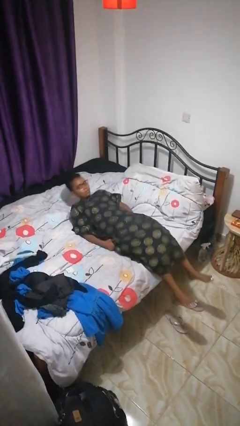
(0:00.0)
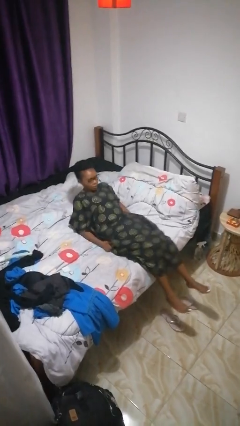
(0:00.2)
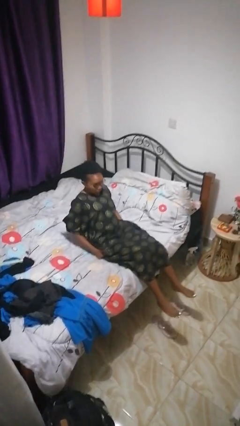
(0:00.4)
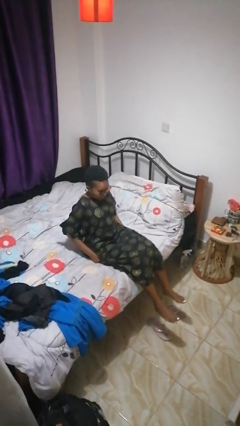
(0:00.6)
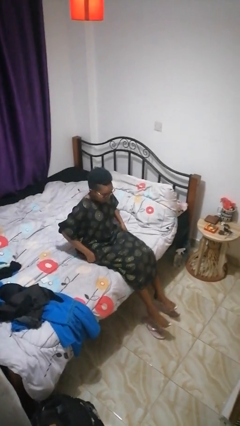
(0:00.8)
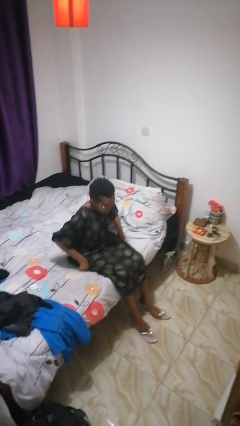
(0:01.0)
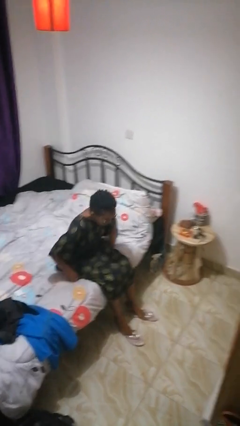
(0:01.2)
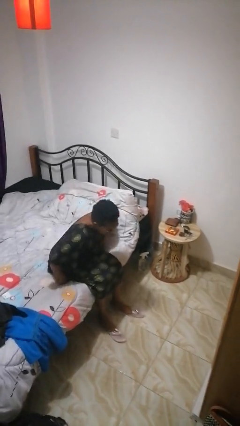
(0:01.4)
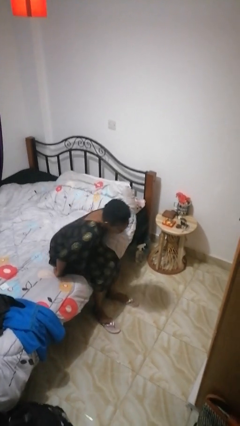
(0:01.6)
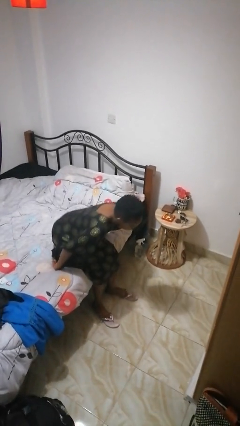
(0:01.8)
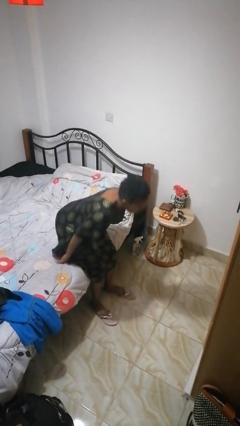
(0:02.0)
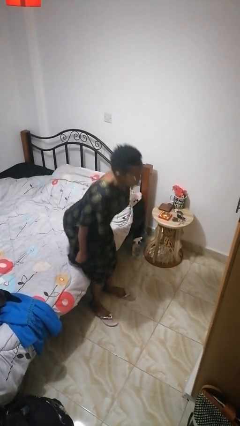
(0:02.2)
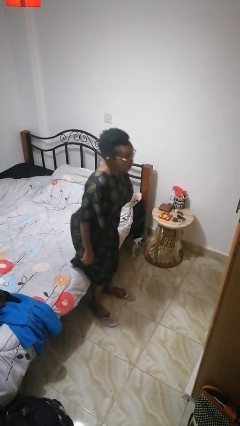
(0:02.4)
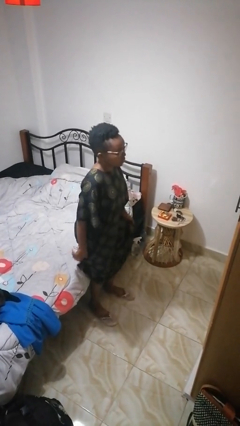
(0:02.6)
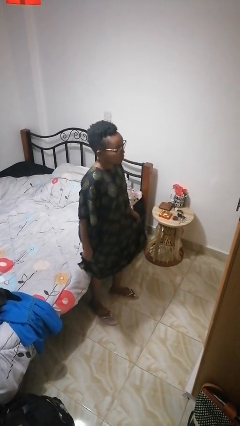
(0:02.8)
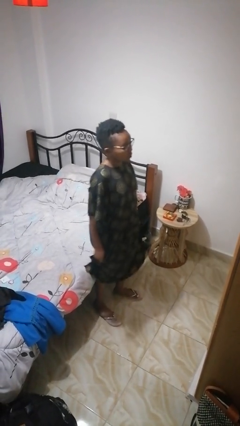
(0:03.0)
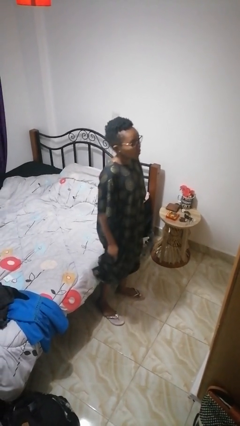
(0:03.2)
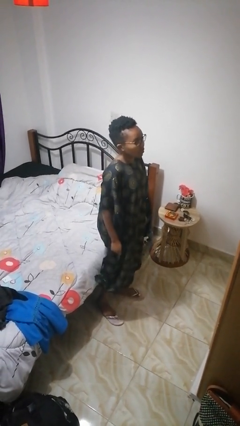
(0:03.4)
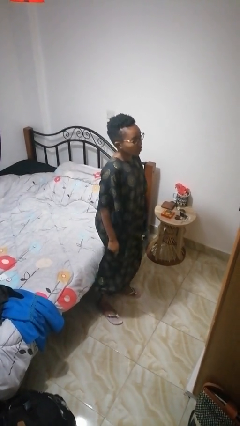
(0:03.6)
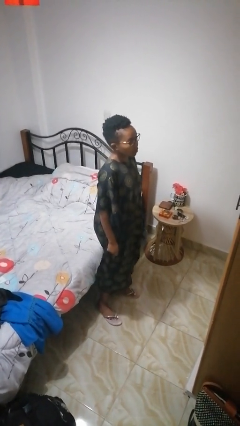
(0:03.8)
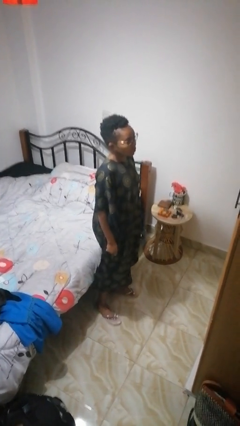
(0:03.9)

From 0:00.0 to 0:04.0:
person stands up

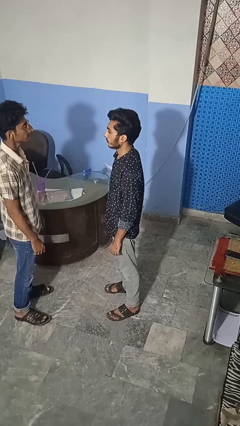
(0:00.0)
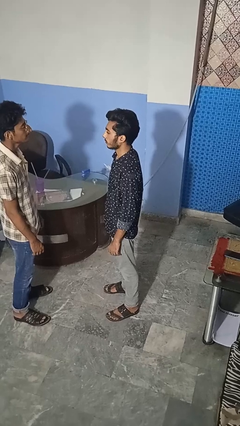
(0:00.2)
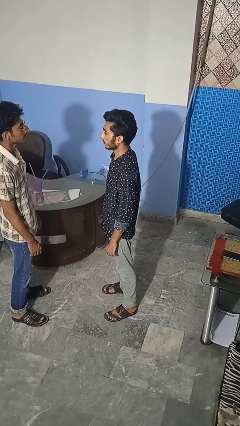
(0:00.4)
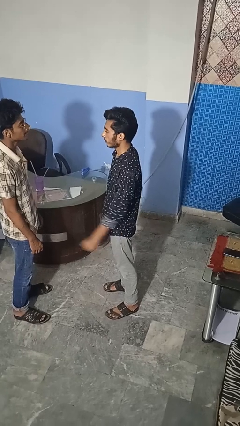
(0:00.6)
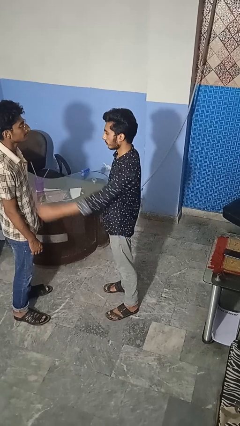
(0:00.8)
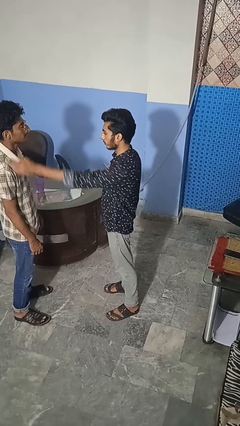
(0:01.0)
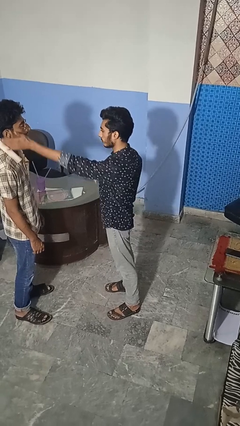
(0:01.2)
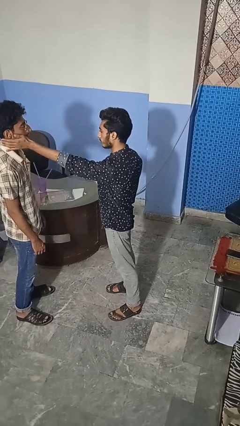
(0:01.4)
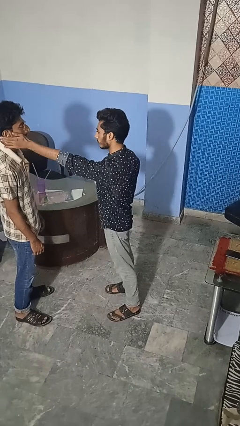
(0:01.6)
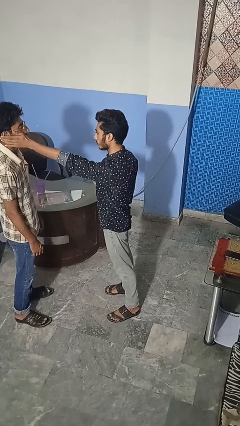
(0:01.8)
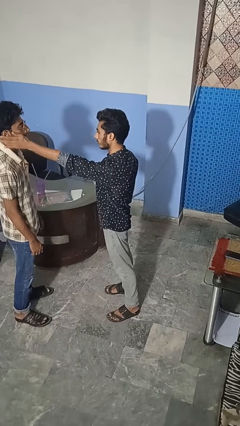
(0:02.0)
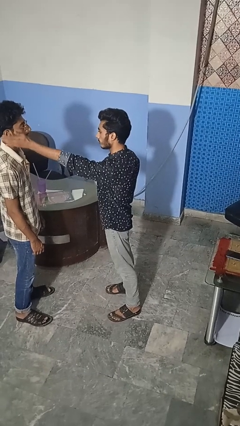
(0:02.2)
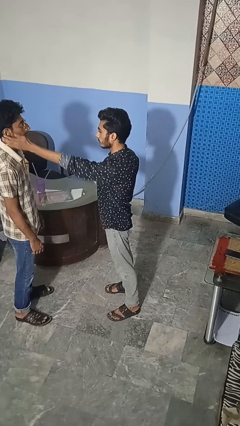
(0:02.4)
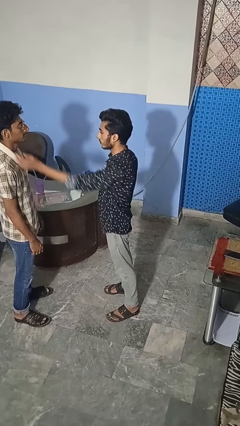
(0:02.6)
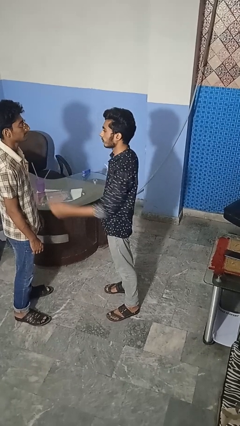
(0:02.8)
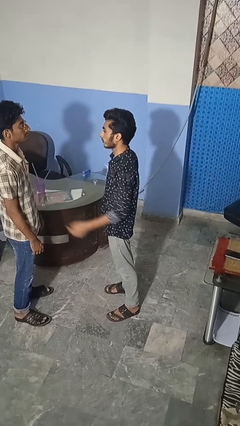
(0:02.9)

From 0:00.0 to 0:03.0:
person touches face of person

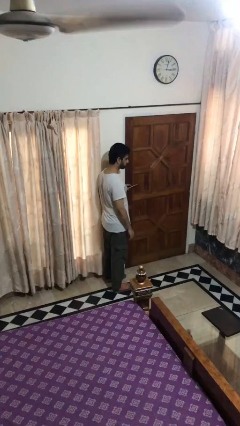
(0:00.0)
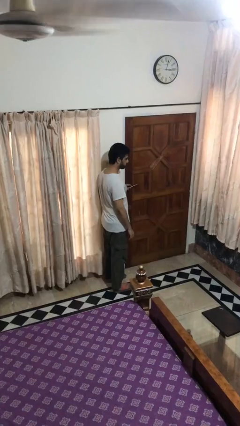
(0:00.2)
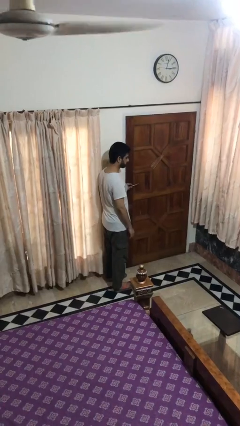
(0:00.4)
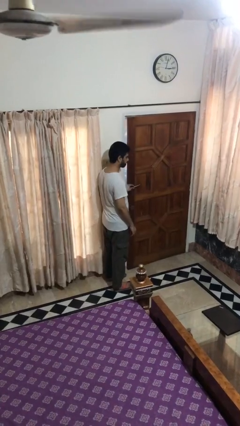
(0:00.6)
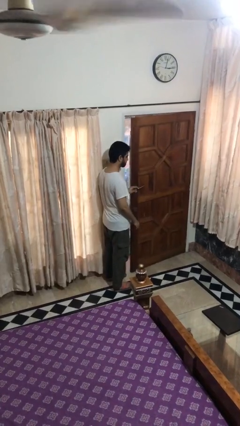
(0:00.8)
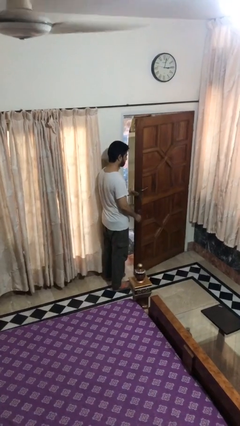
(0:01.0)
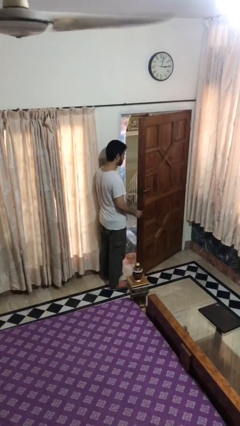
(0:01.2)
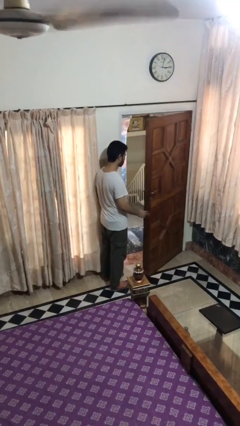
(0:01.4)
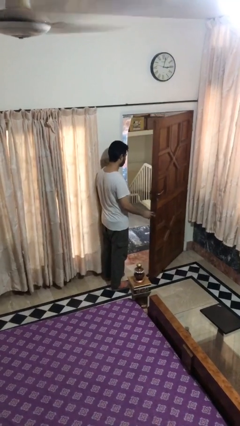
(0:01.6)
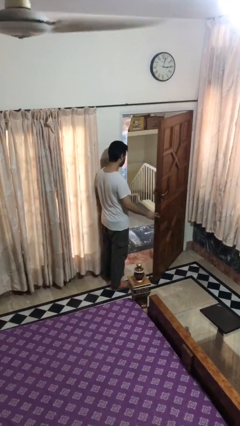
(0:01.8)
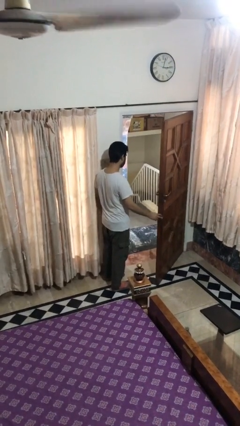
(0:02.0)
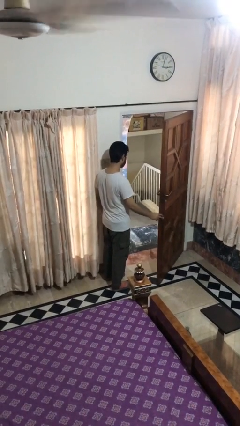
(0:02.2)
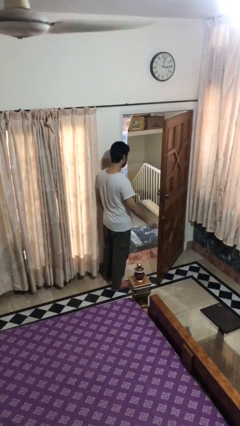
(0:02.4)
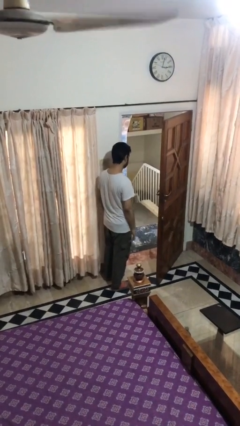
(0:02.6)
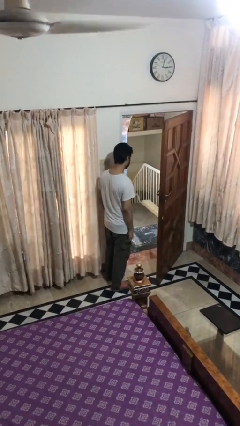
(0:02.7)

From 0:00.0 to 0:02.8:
person opens facility door

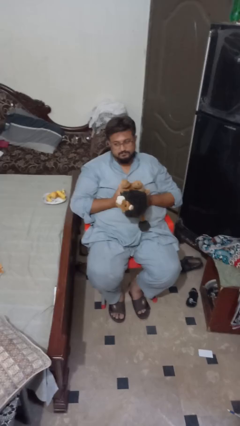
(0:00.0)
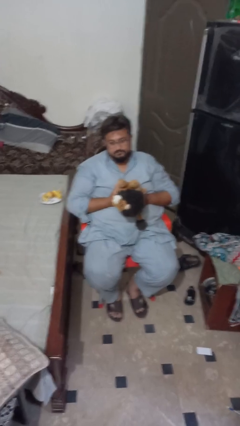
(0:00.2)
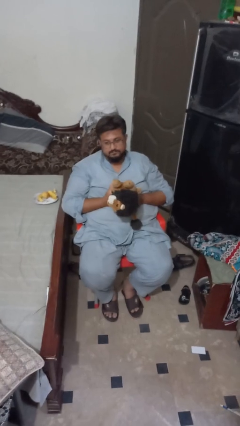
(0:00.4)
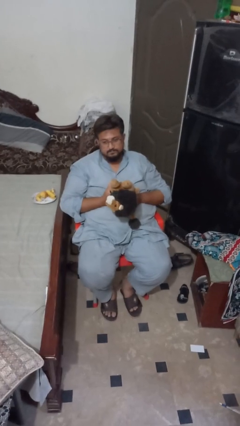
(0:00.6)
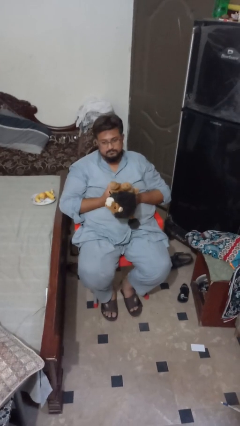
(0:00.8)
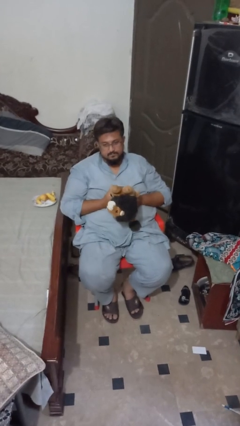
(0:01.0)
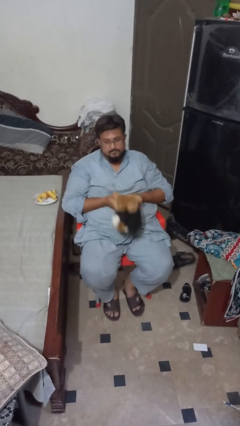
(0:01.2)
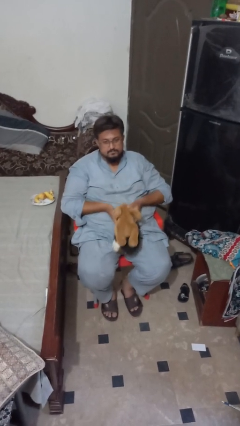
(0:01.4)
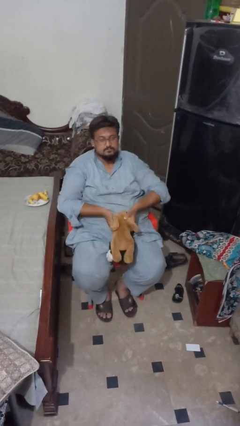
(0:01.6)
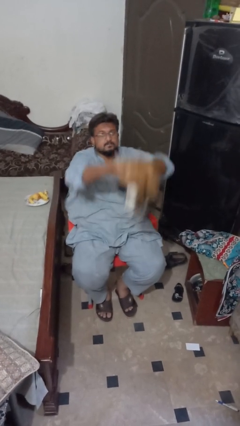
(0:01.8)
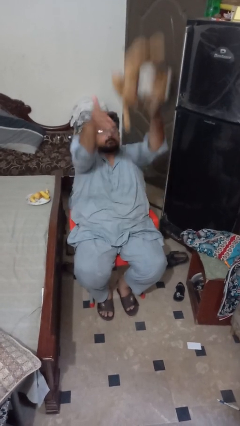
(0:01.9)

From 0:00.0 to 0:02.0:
person drops object

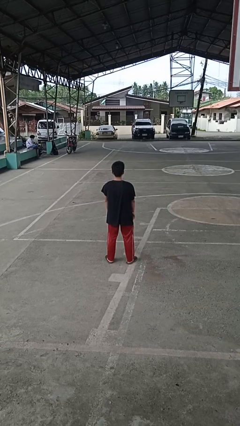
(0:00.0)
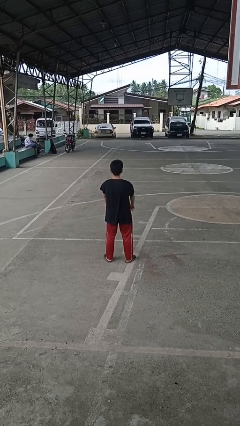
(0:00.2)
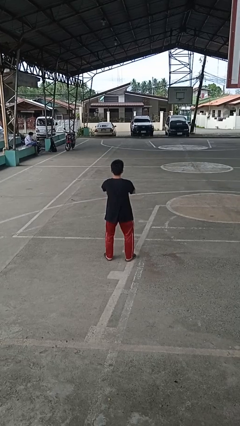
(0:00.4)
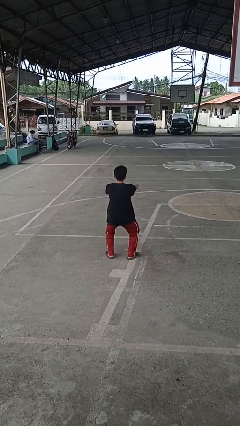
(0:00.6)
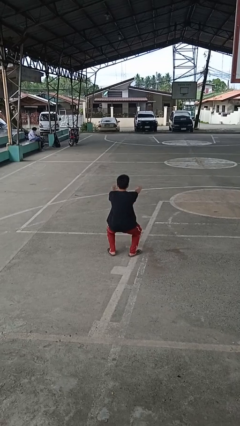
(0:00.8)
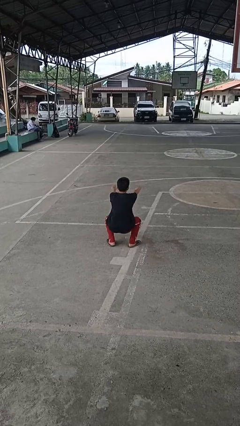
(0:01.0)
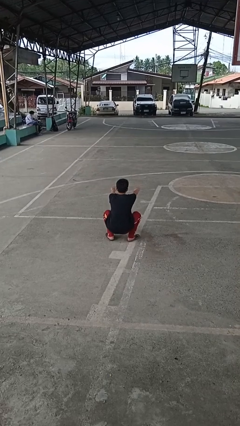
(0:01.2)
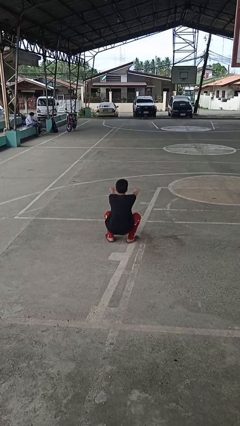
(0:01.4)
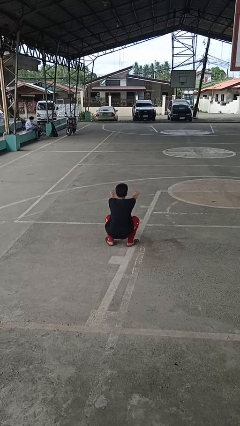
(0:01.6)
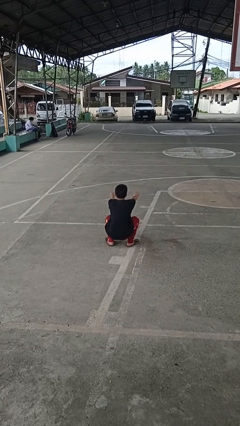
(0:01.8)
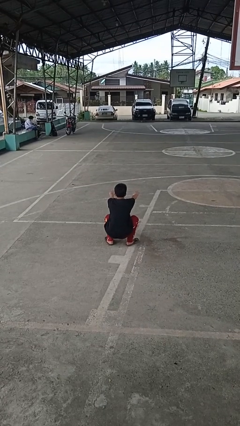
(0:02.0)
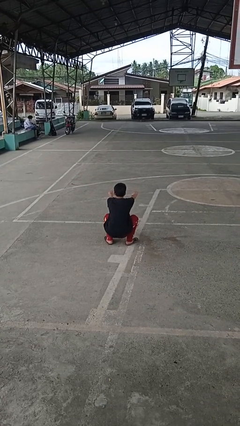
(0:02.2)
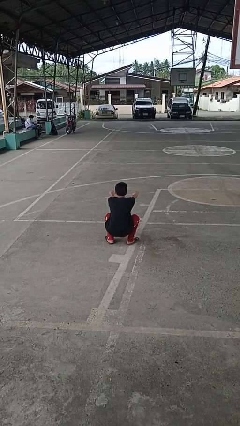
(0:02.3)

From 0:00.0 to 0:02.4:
person squats

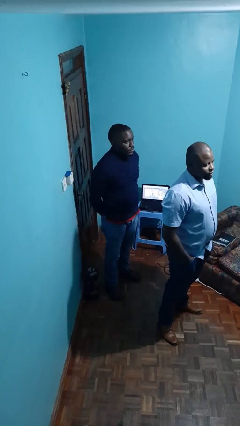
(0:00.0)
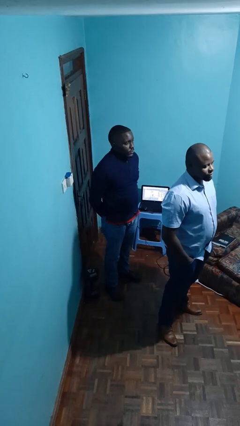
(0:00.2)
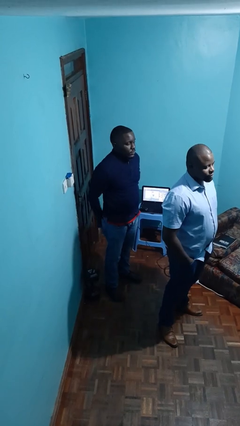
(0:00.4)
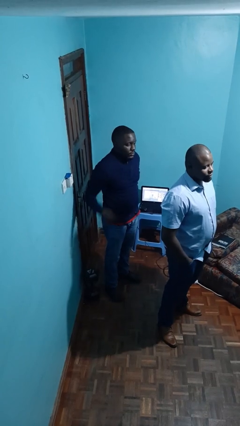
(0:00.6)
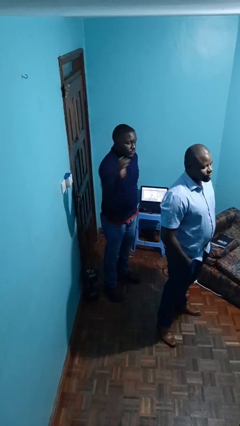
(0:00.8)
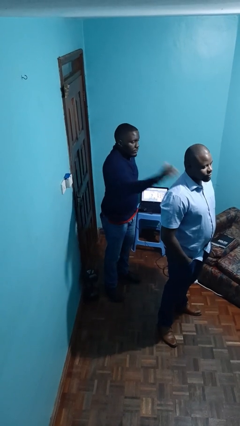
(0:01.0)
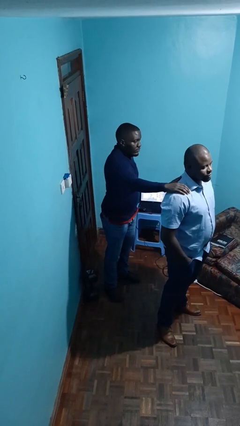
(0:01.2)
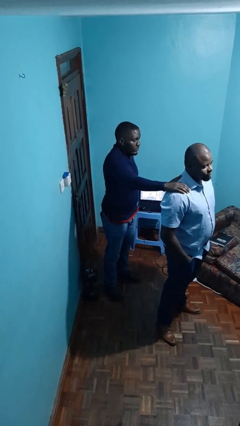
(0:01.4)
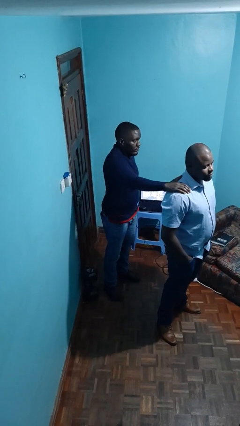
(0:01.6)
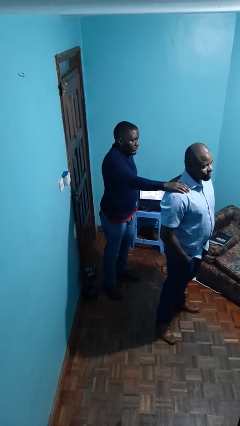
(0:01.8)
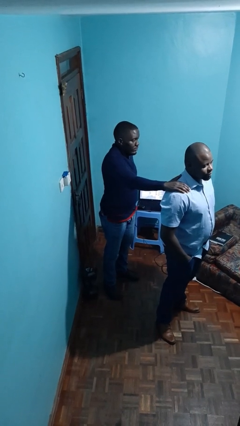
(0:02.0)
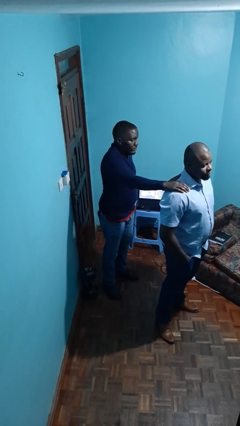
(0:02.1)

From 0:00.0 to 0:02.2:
person grabs person by shoulder

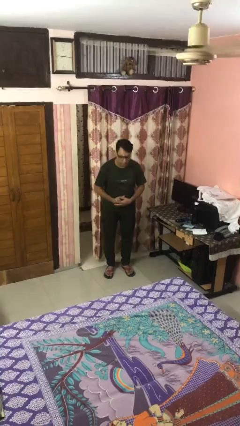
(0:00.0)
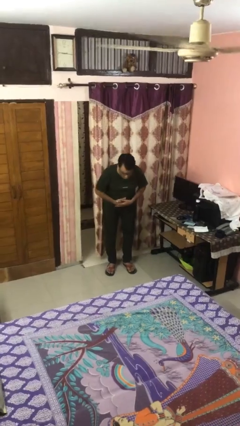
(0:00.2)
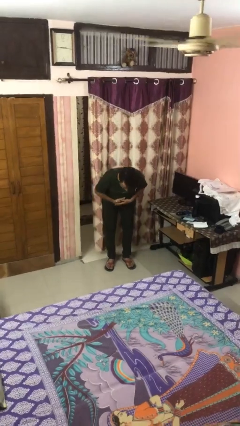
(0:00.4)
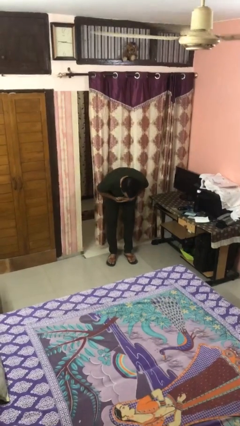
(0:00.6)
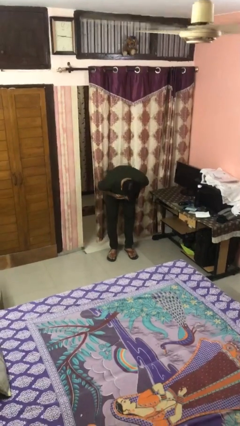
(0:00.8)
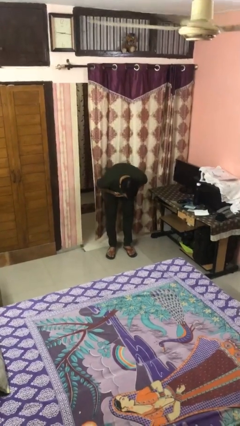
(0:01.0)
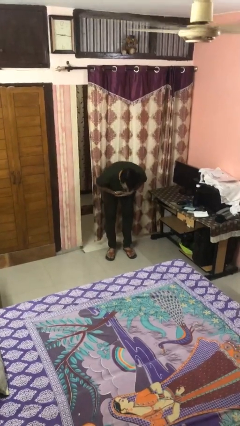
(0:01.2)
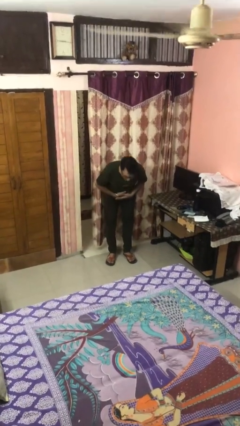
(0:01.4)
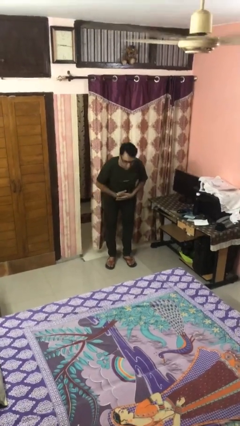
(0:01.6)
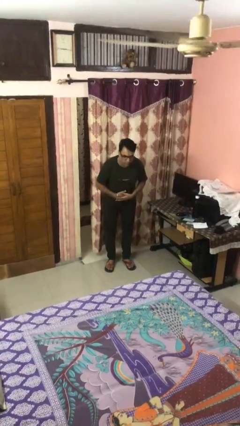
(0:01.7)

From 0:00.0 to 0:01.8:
person bows
